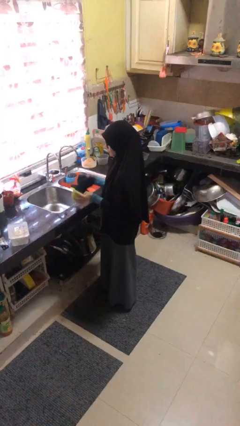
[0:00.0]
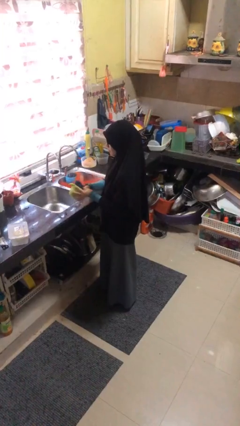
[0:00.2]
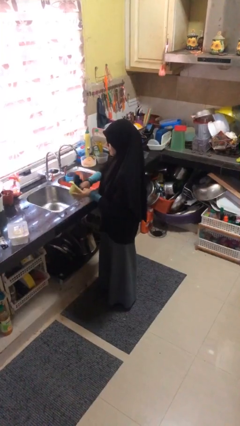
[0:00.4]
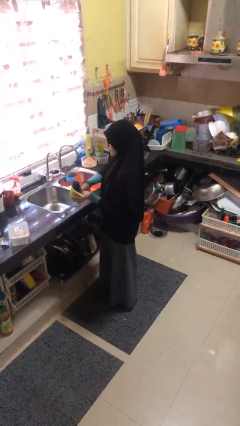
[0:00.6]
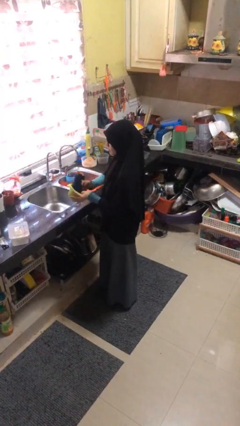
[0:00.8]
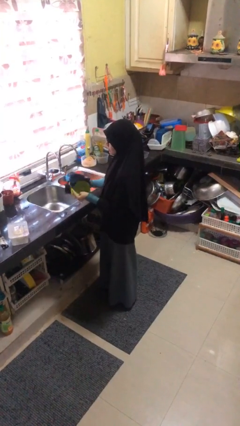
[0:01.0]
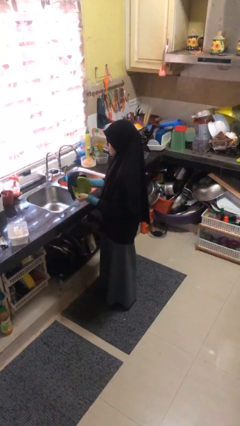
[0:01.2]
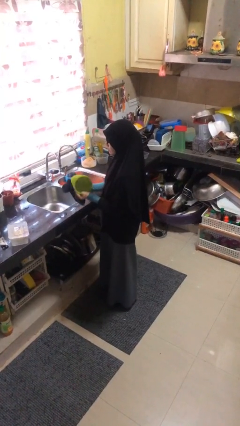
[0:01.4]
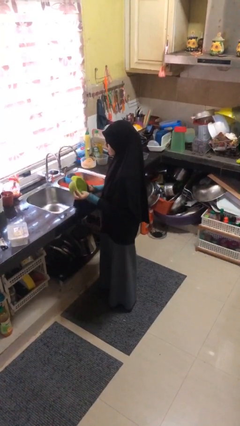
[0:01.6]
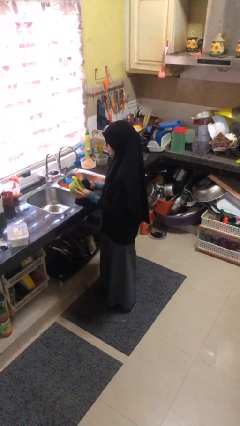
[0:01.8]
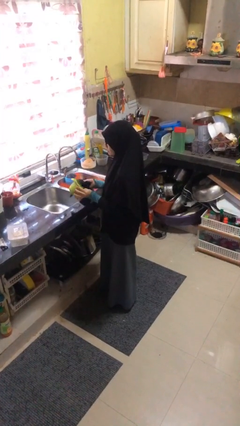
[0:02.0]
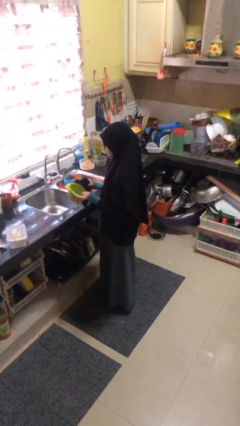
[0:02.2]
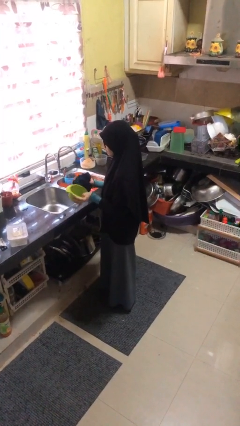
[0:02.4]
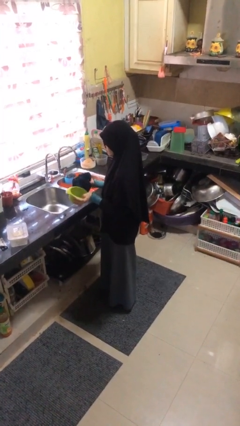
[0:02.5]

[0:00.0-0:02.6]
person dries dish

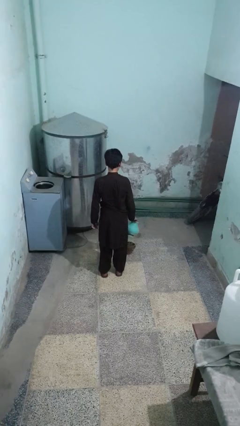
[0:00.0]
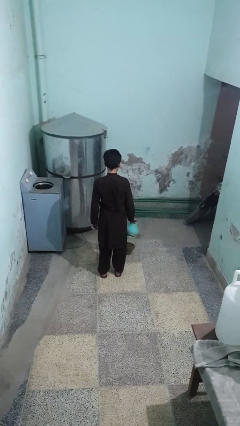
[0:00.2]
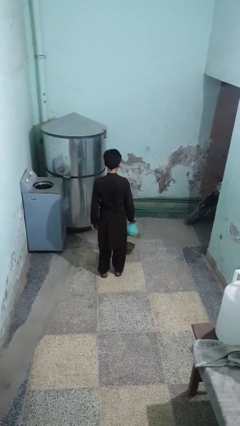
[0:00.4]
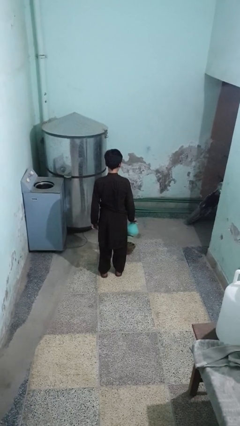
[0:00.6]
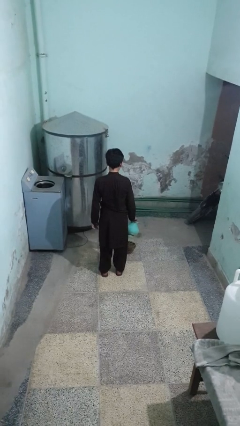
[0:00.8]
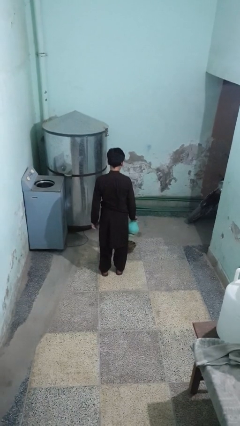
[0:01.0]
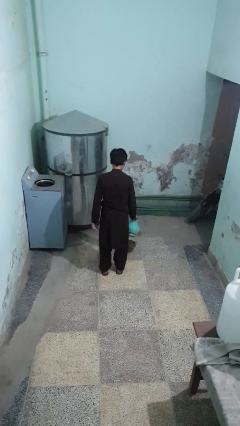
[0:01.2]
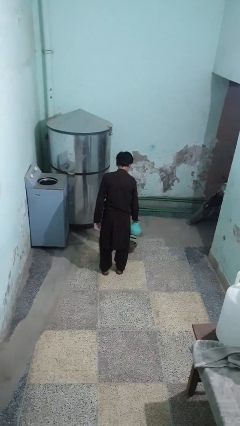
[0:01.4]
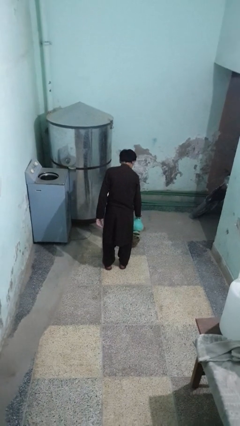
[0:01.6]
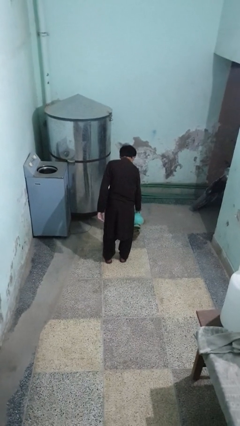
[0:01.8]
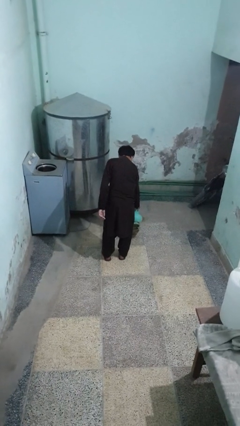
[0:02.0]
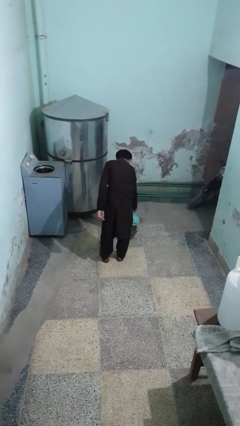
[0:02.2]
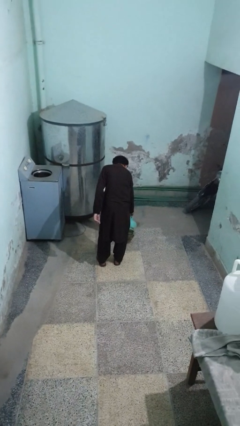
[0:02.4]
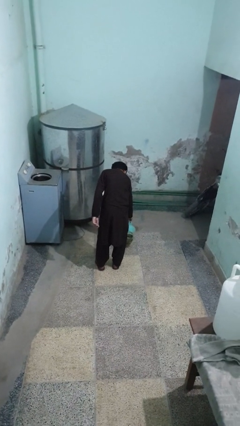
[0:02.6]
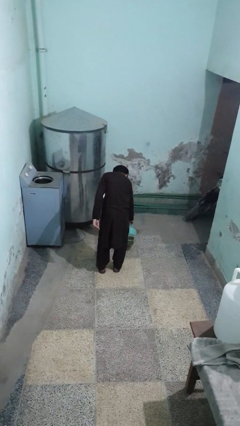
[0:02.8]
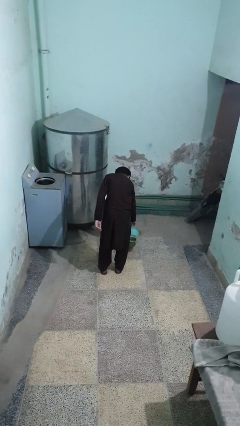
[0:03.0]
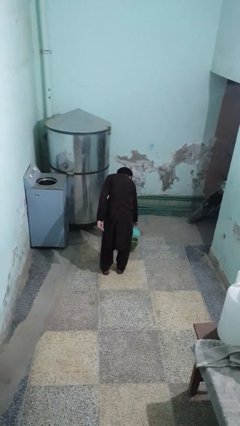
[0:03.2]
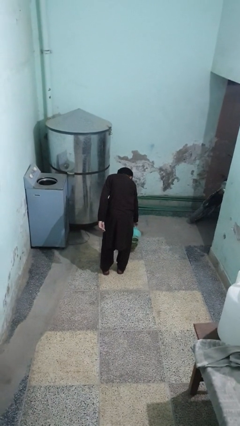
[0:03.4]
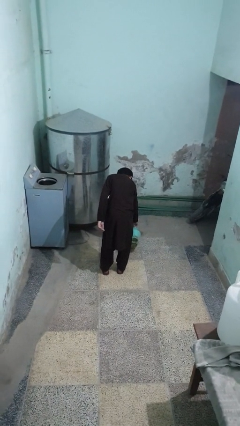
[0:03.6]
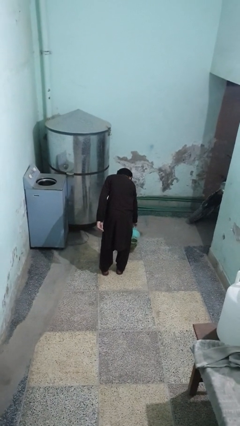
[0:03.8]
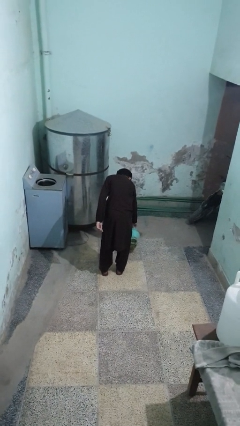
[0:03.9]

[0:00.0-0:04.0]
person waters houseplant

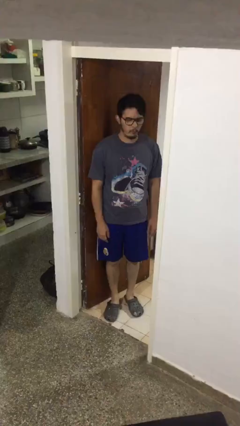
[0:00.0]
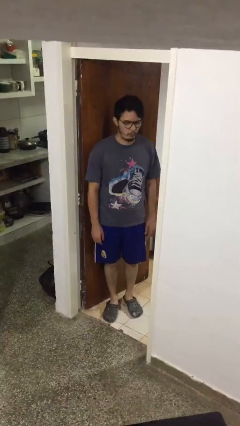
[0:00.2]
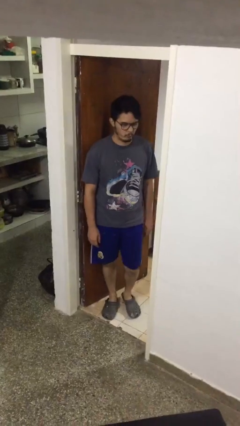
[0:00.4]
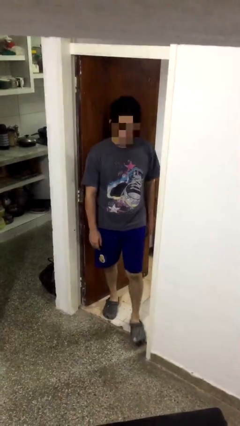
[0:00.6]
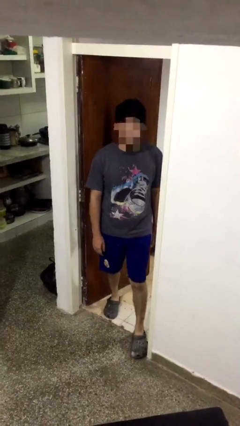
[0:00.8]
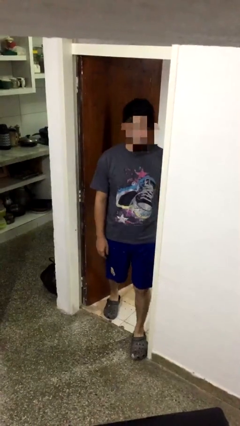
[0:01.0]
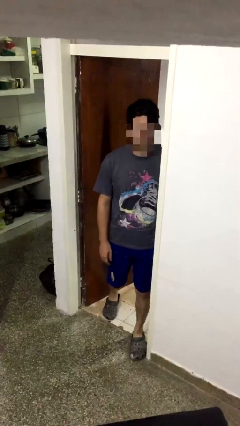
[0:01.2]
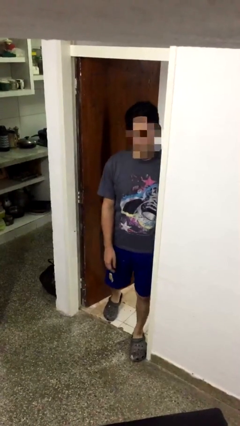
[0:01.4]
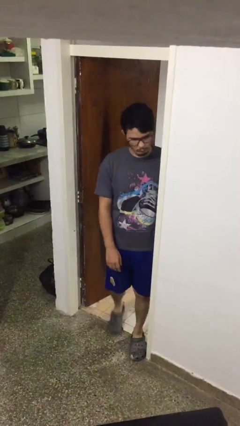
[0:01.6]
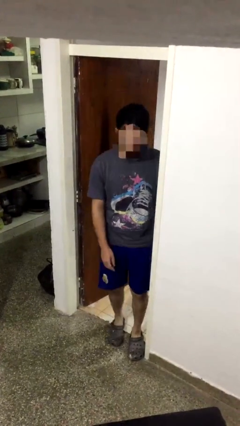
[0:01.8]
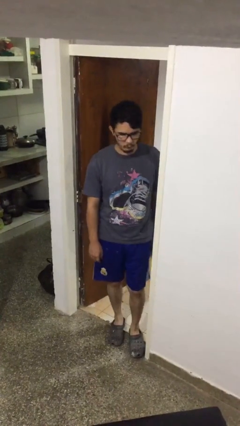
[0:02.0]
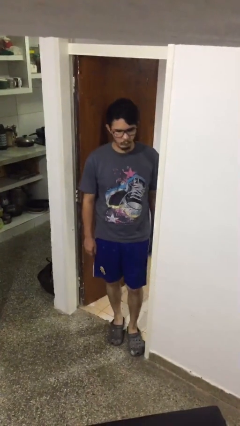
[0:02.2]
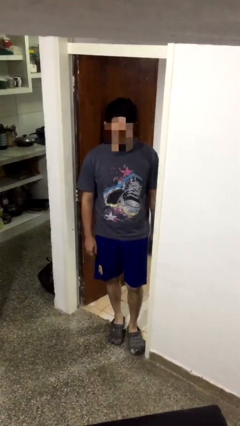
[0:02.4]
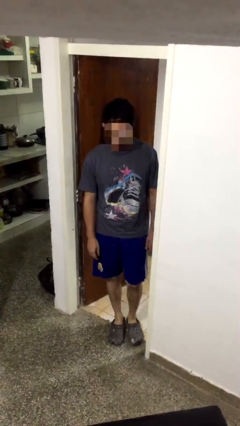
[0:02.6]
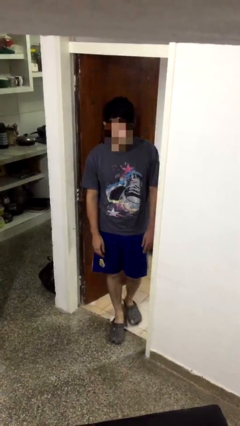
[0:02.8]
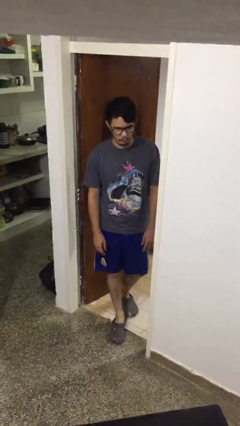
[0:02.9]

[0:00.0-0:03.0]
person bumps into wall

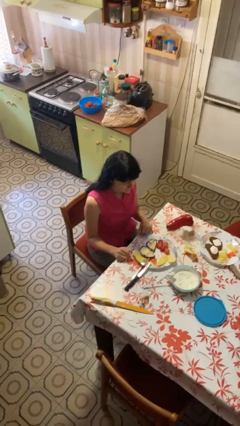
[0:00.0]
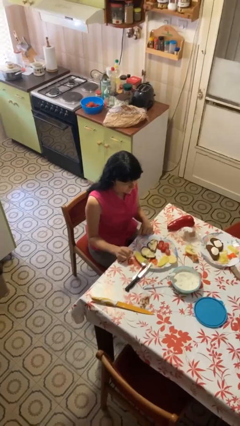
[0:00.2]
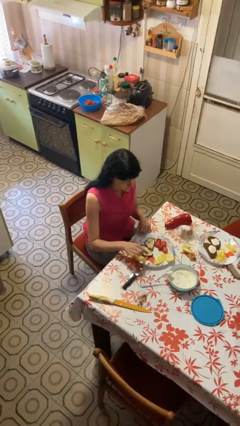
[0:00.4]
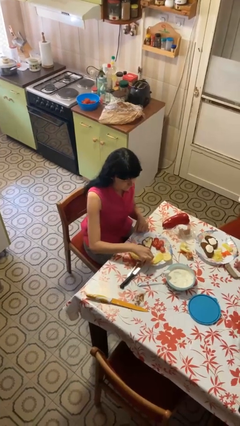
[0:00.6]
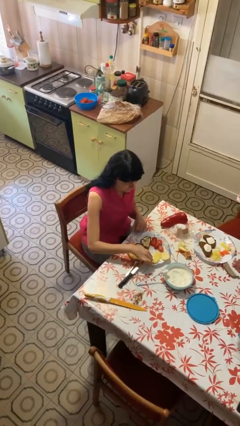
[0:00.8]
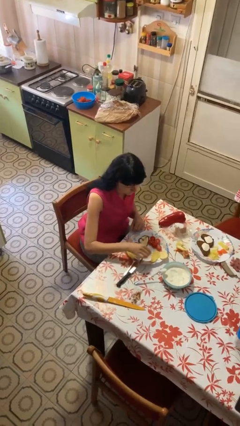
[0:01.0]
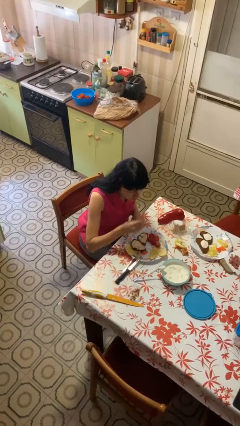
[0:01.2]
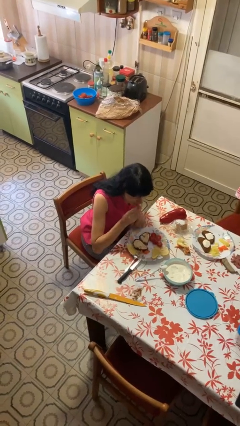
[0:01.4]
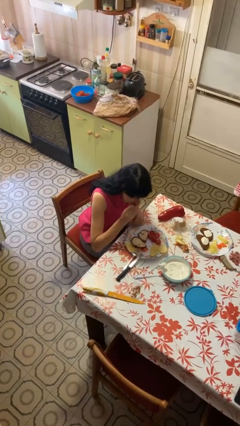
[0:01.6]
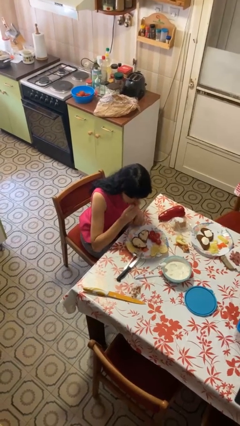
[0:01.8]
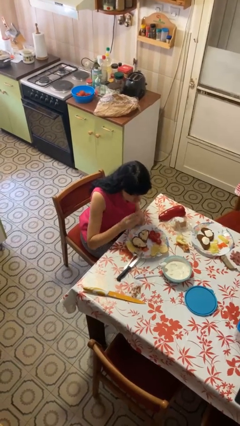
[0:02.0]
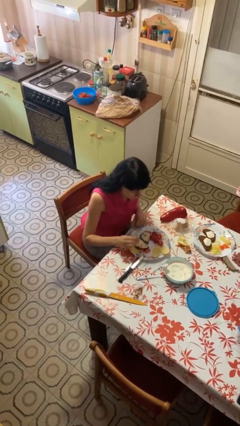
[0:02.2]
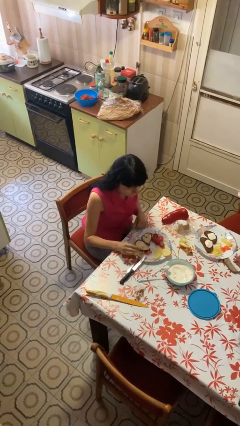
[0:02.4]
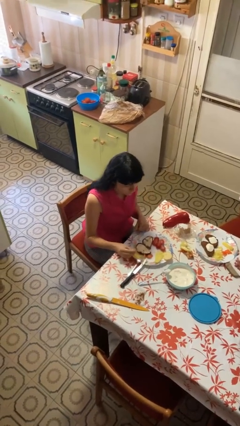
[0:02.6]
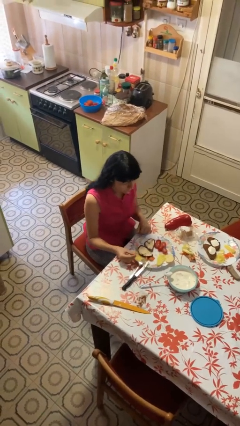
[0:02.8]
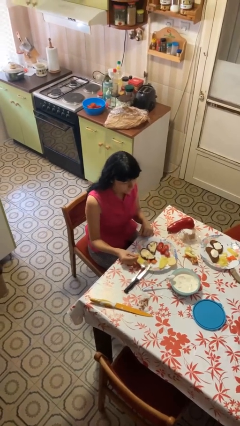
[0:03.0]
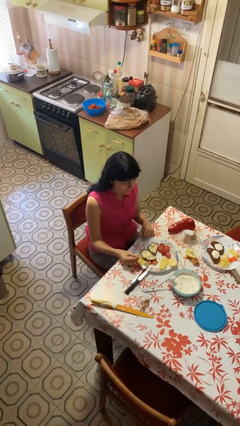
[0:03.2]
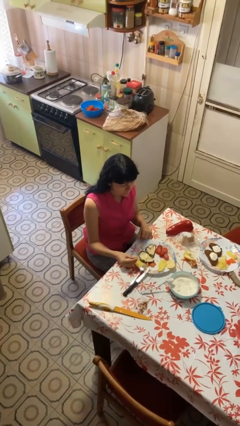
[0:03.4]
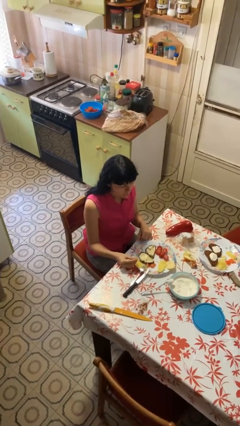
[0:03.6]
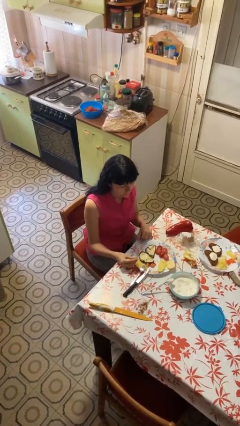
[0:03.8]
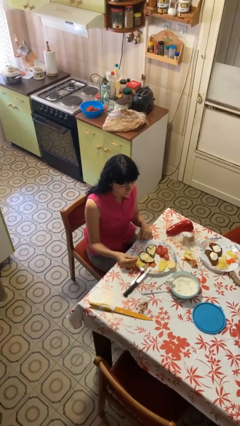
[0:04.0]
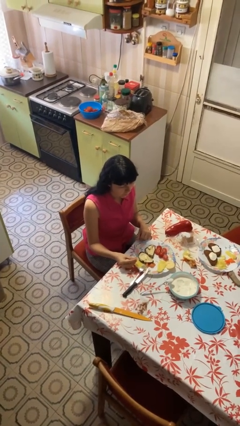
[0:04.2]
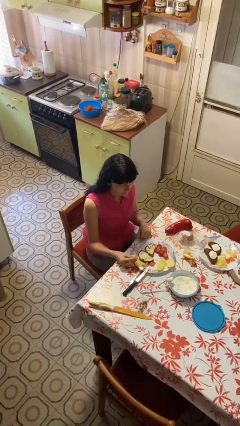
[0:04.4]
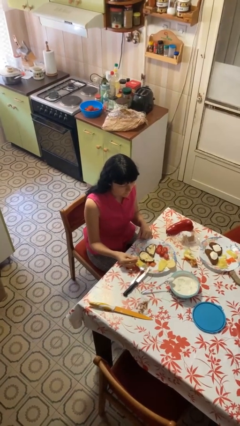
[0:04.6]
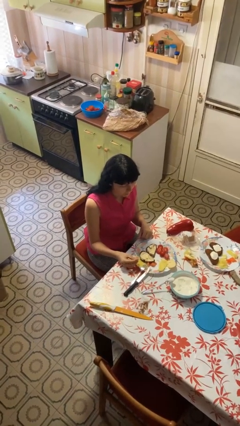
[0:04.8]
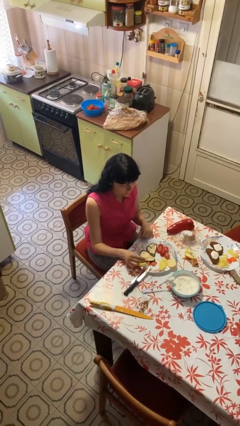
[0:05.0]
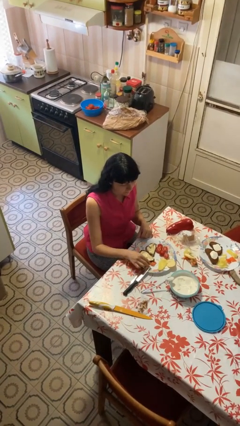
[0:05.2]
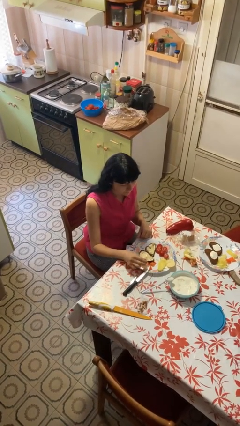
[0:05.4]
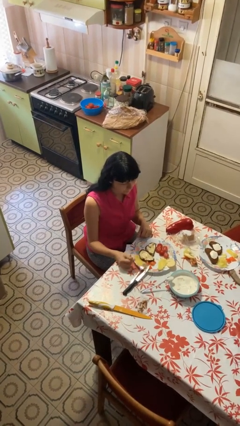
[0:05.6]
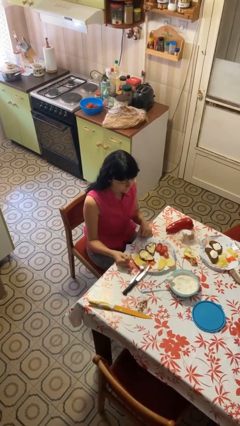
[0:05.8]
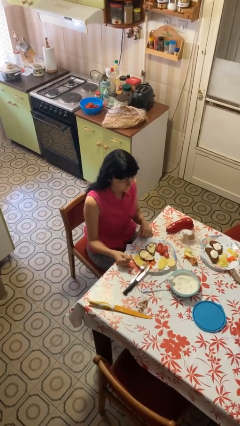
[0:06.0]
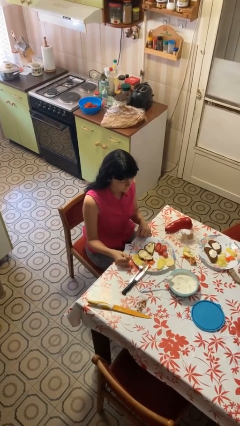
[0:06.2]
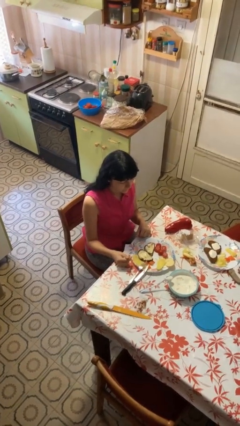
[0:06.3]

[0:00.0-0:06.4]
person eats with hands

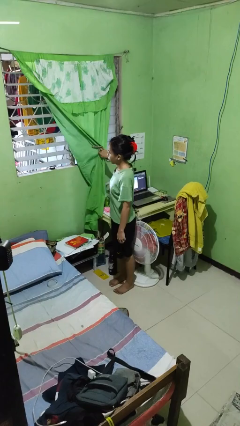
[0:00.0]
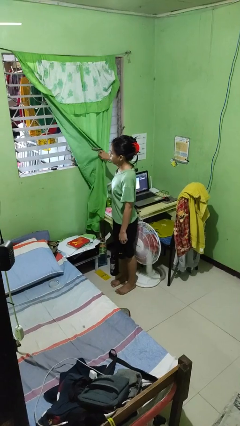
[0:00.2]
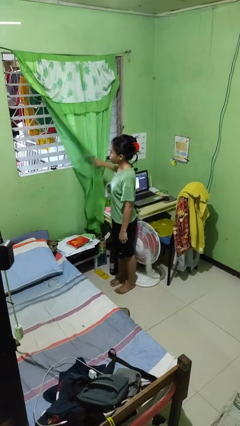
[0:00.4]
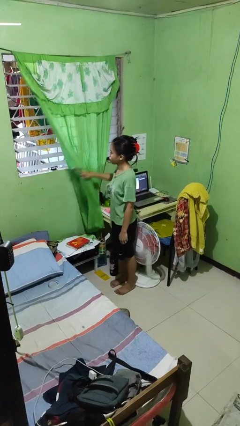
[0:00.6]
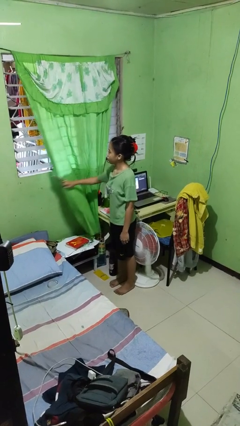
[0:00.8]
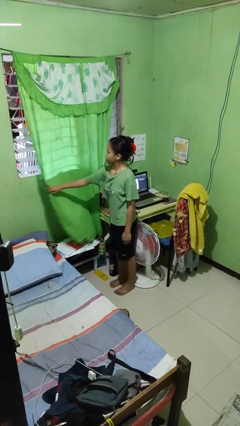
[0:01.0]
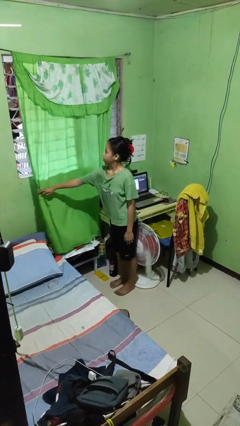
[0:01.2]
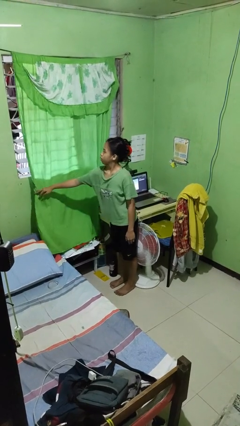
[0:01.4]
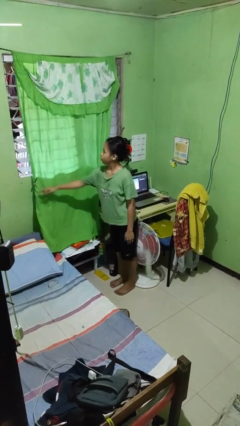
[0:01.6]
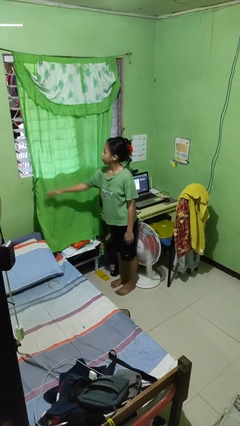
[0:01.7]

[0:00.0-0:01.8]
person closes curtains

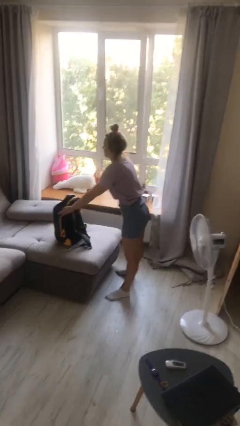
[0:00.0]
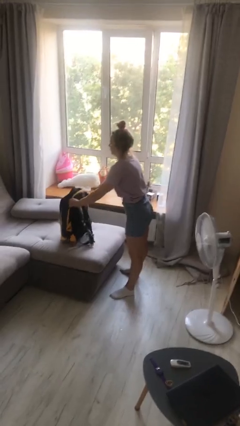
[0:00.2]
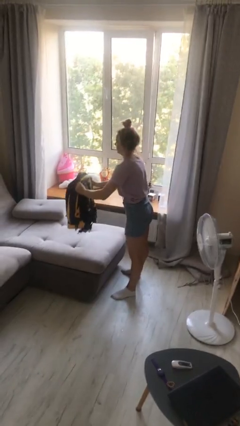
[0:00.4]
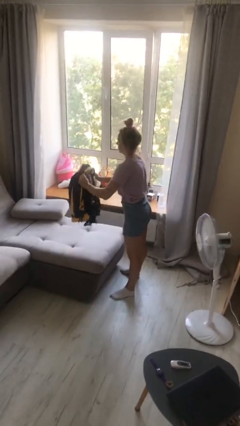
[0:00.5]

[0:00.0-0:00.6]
person picks up object from bed
